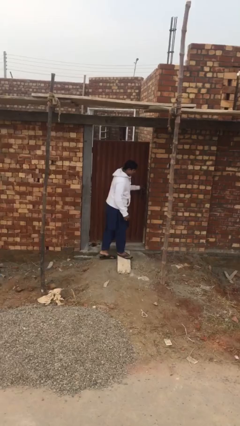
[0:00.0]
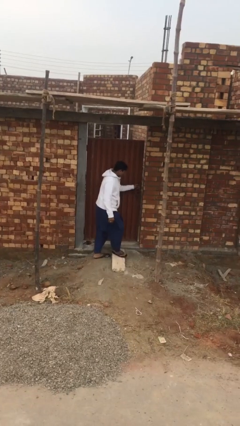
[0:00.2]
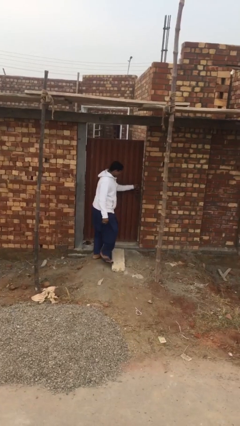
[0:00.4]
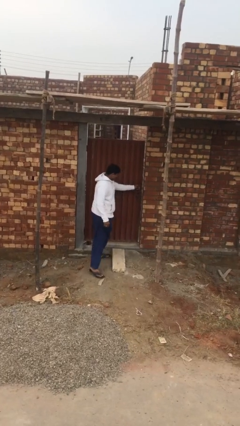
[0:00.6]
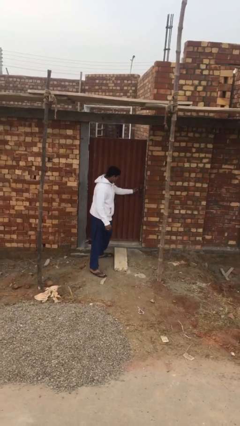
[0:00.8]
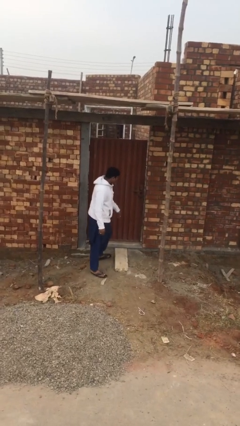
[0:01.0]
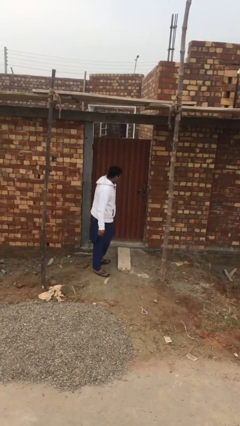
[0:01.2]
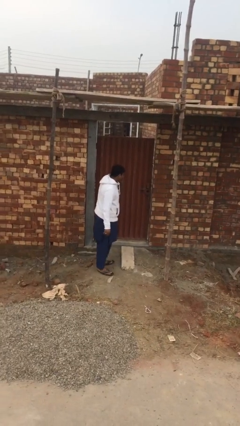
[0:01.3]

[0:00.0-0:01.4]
person closes facility door

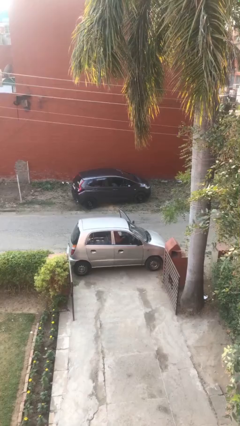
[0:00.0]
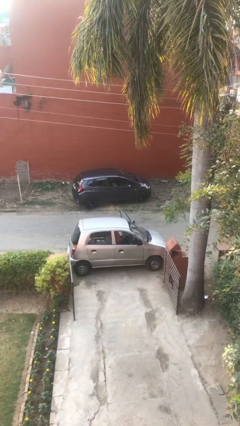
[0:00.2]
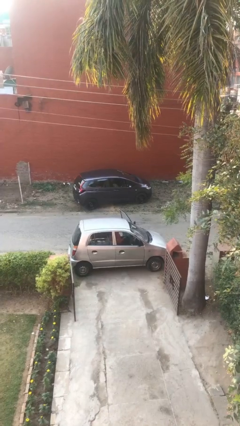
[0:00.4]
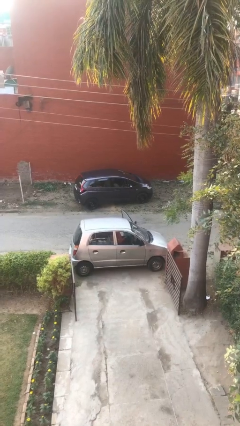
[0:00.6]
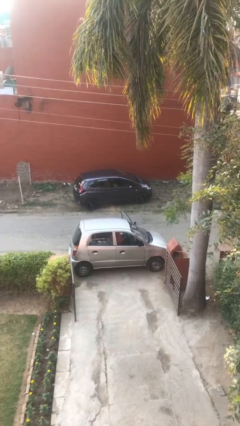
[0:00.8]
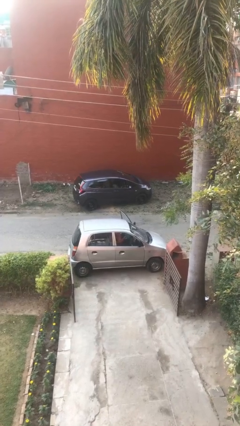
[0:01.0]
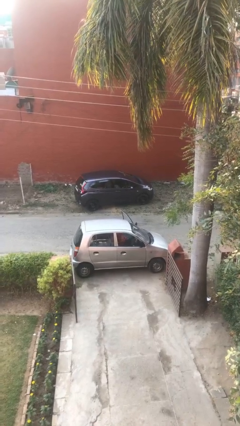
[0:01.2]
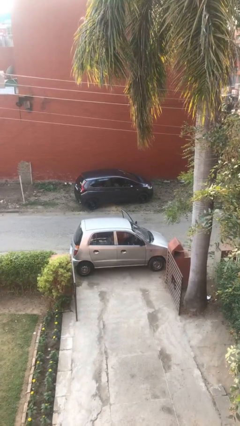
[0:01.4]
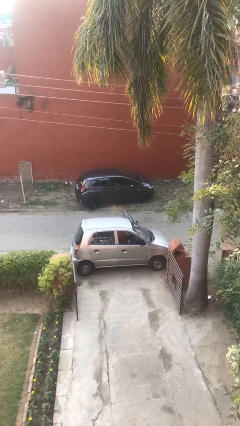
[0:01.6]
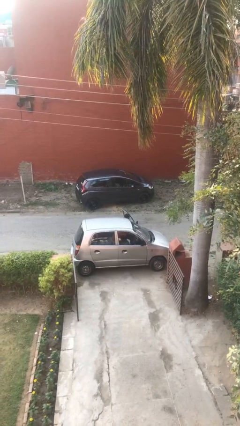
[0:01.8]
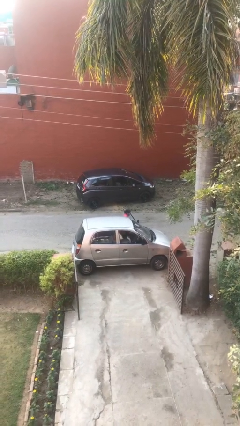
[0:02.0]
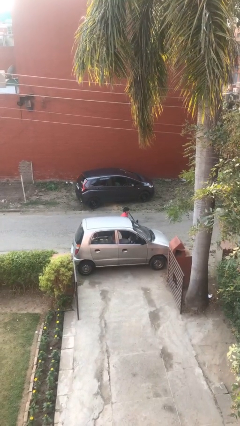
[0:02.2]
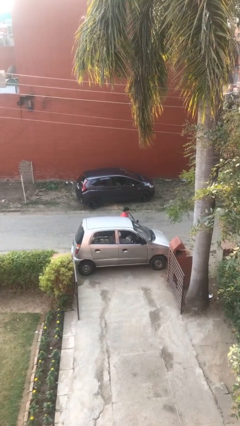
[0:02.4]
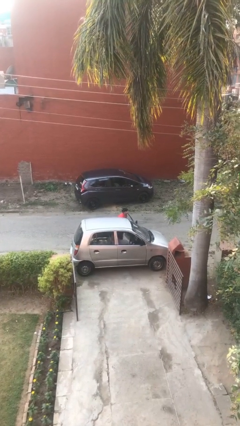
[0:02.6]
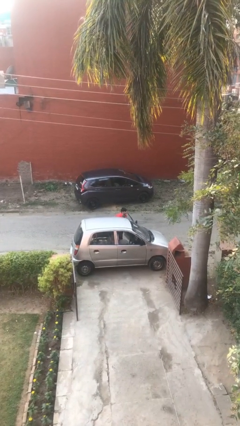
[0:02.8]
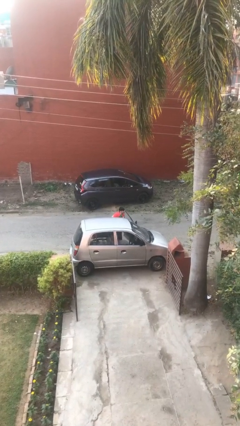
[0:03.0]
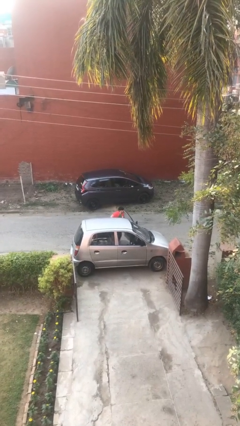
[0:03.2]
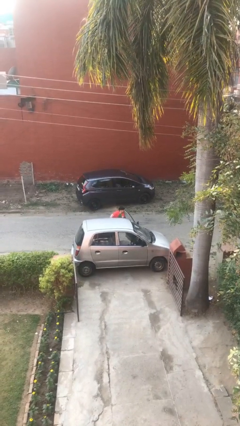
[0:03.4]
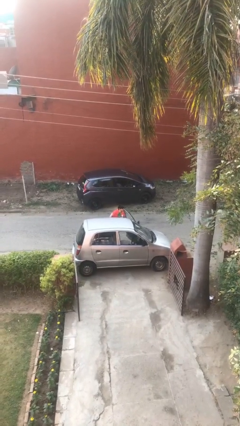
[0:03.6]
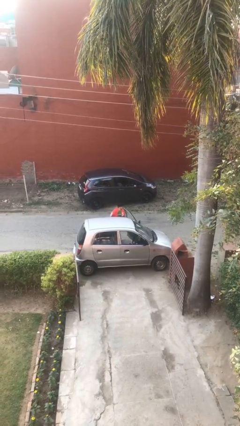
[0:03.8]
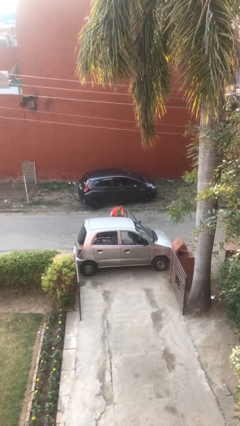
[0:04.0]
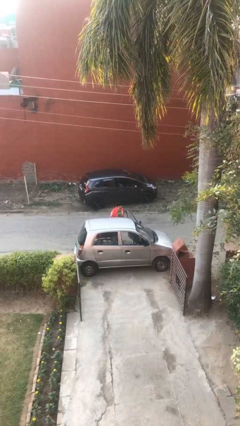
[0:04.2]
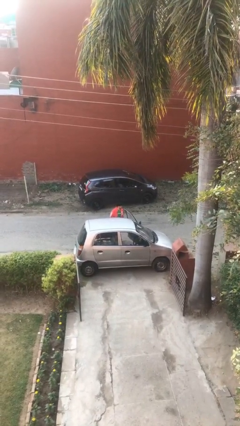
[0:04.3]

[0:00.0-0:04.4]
person exits car

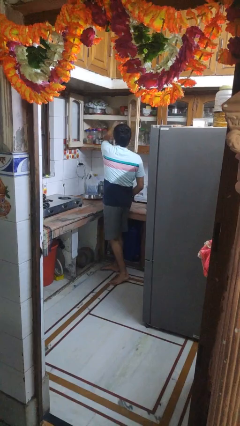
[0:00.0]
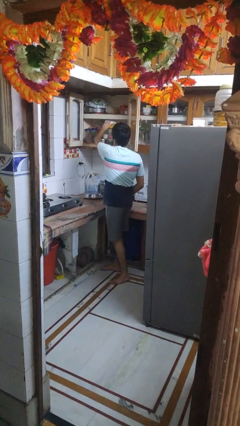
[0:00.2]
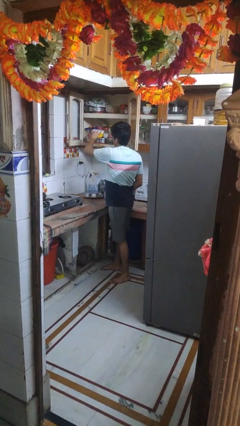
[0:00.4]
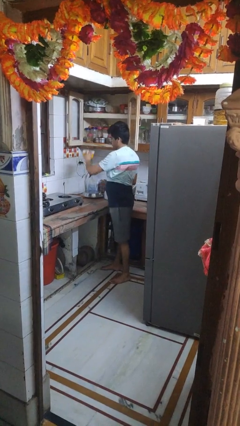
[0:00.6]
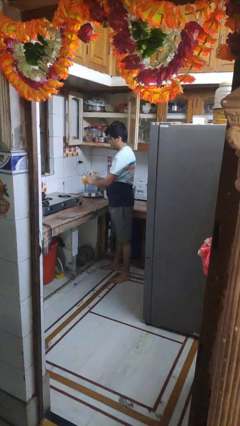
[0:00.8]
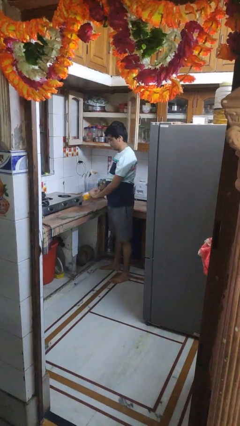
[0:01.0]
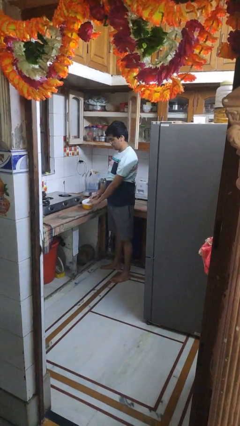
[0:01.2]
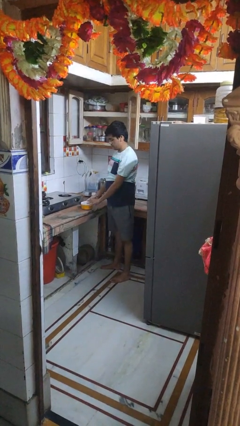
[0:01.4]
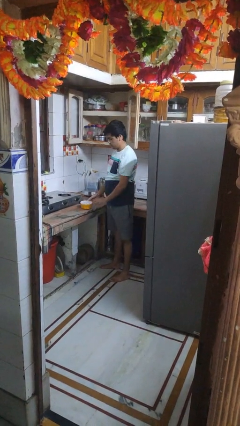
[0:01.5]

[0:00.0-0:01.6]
person takes object from cabinet

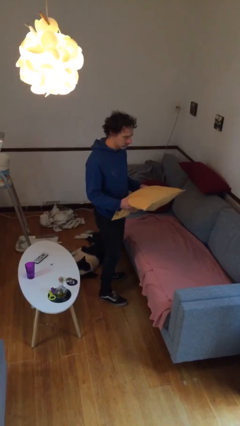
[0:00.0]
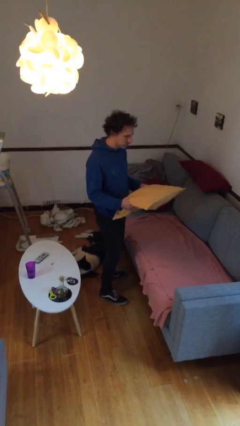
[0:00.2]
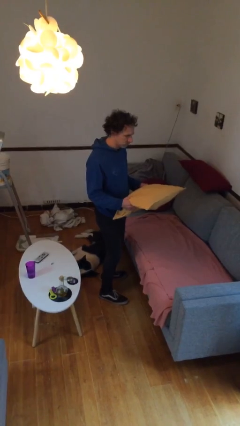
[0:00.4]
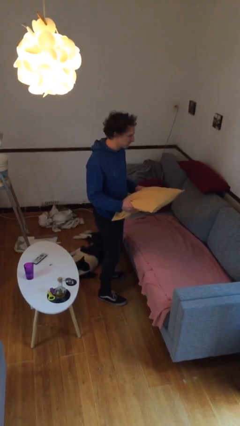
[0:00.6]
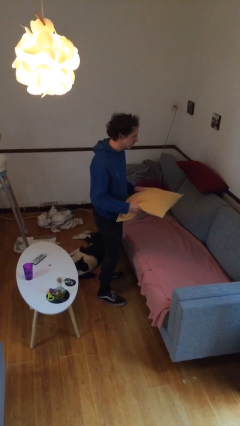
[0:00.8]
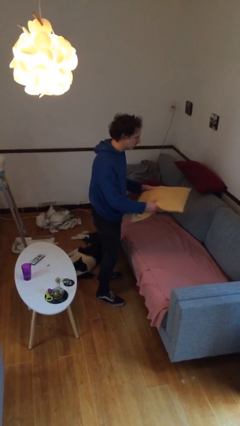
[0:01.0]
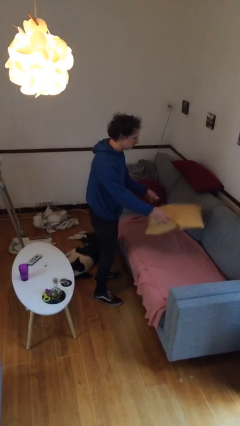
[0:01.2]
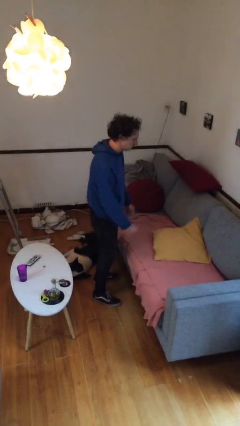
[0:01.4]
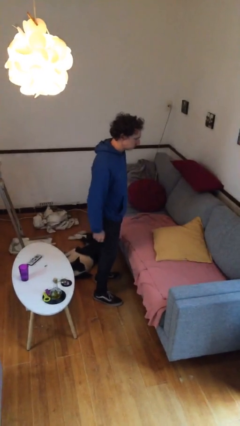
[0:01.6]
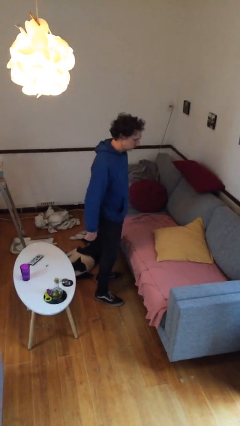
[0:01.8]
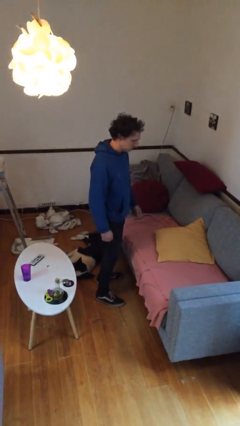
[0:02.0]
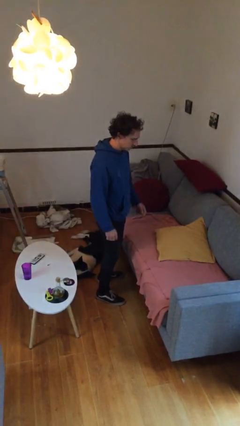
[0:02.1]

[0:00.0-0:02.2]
person puts down object on couch

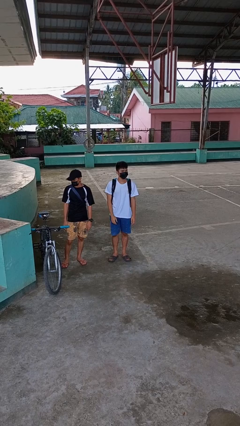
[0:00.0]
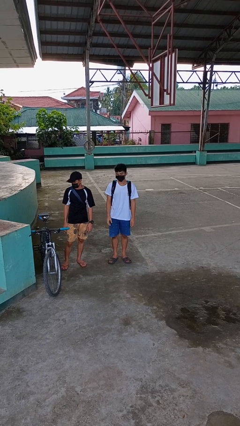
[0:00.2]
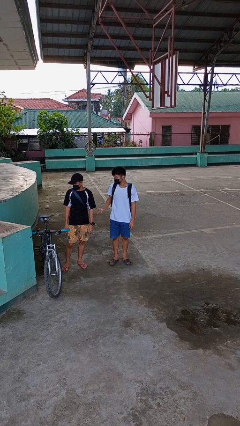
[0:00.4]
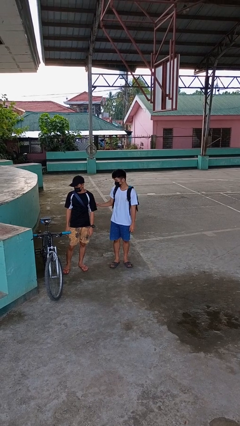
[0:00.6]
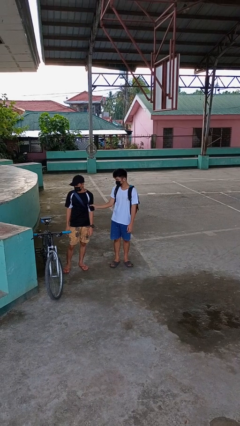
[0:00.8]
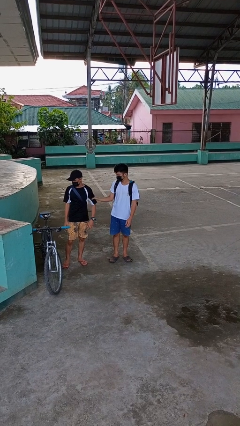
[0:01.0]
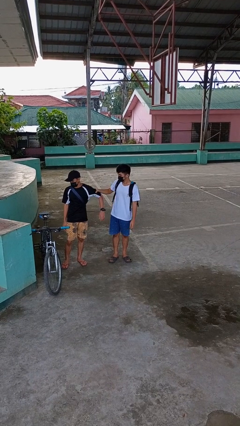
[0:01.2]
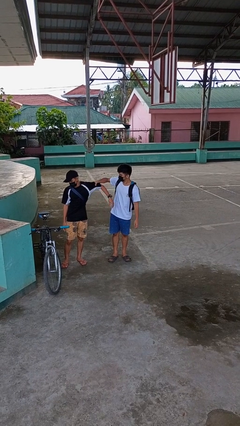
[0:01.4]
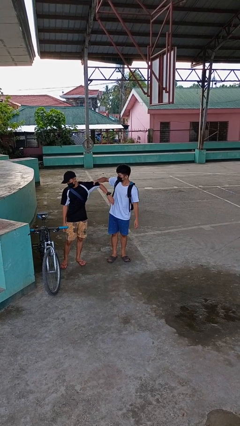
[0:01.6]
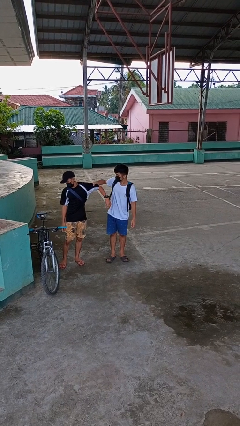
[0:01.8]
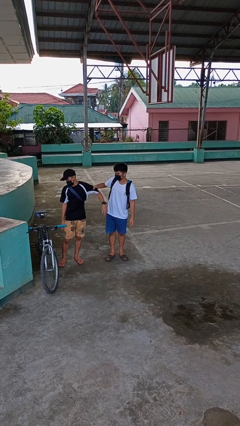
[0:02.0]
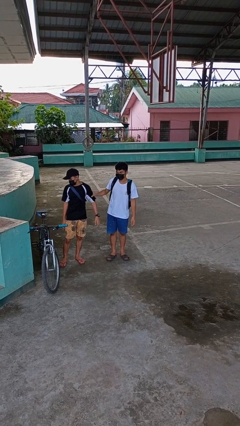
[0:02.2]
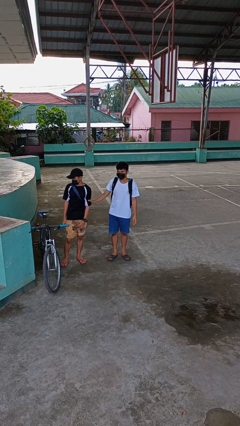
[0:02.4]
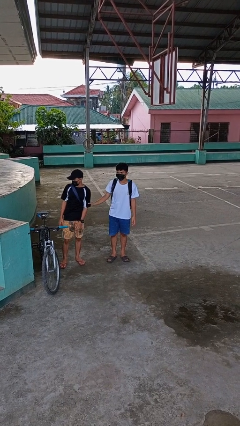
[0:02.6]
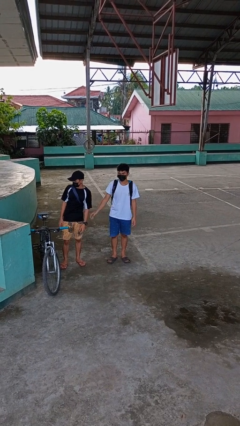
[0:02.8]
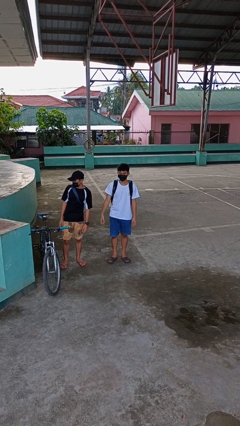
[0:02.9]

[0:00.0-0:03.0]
person grabs person by bicep

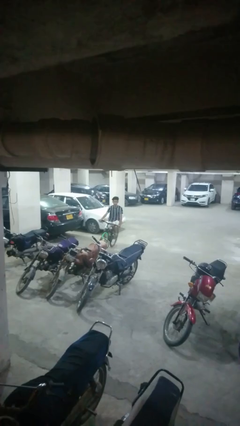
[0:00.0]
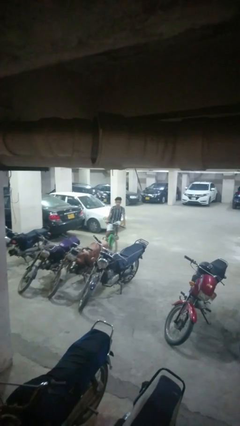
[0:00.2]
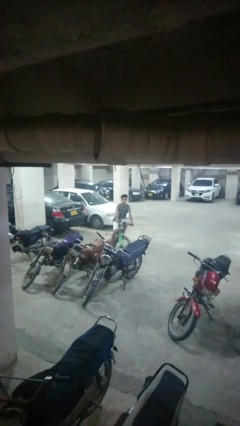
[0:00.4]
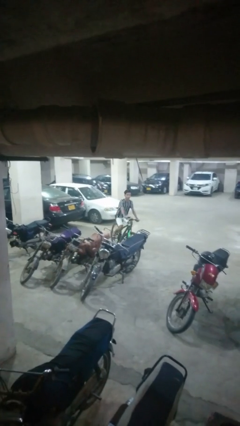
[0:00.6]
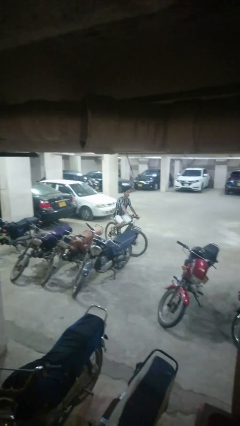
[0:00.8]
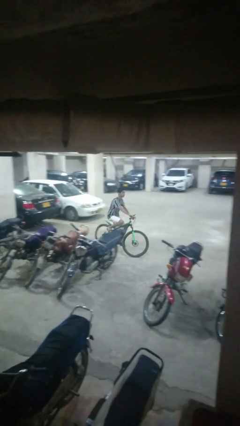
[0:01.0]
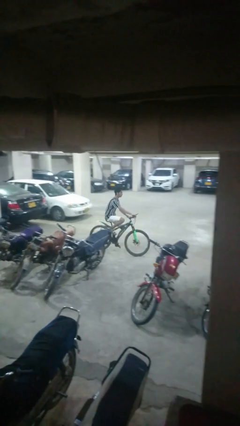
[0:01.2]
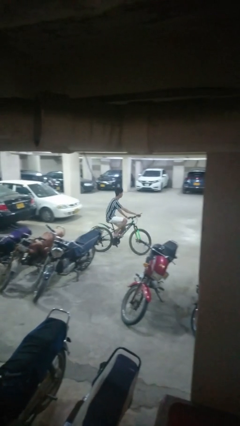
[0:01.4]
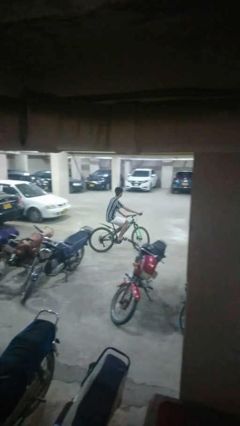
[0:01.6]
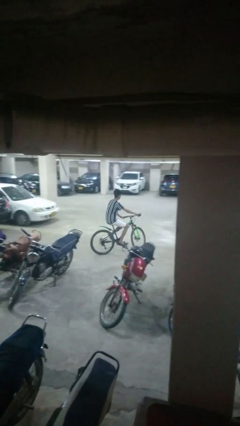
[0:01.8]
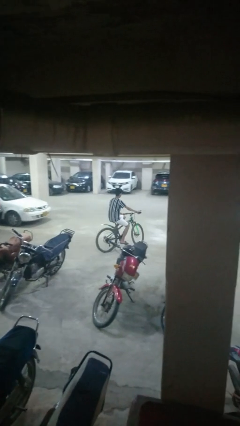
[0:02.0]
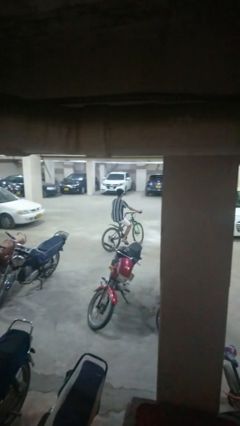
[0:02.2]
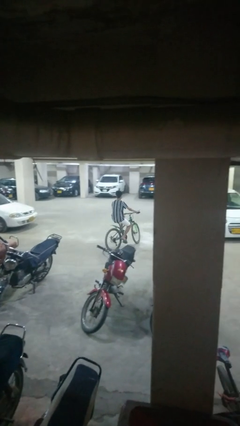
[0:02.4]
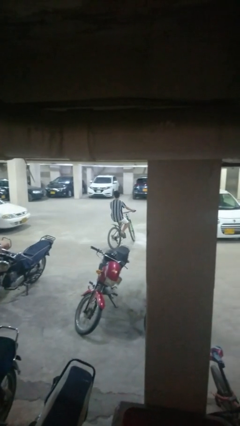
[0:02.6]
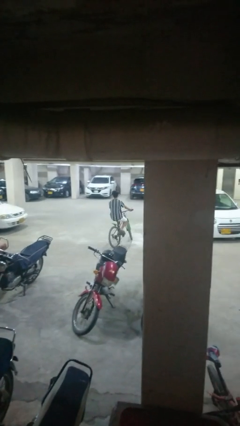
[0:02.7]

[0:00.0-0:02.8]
person rides bicycle

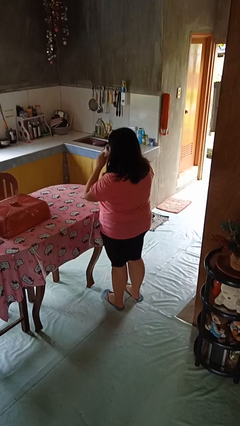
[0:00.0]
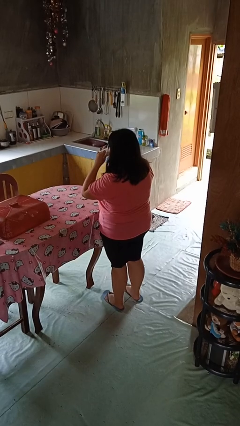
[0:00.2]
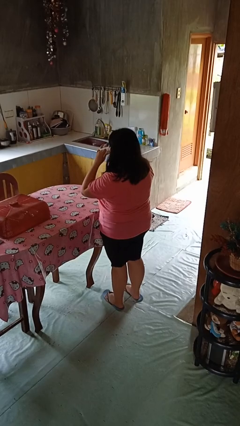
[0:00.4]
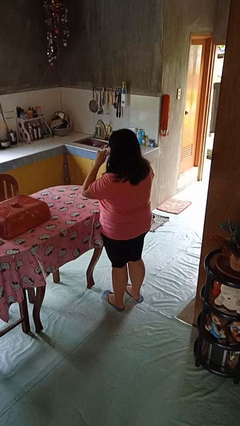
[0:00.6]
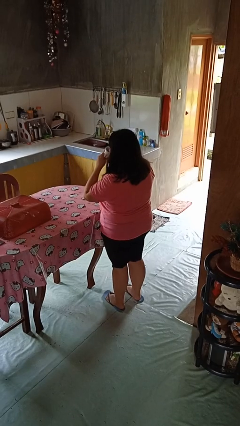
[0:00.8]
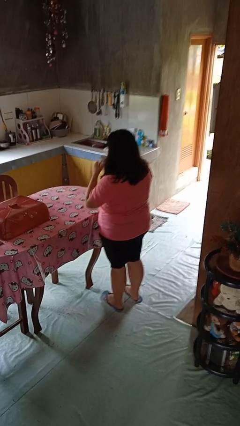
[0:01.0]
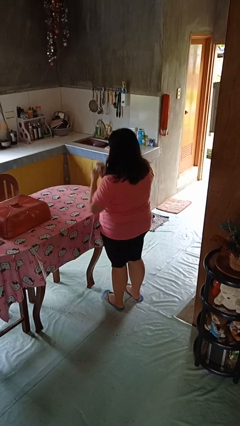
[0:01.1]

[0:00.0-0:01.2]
person drinks from mug

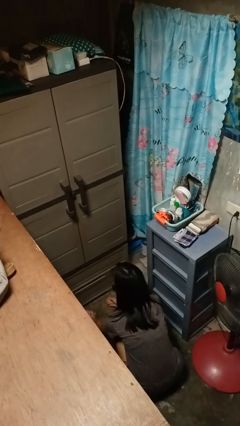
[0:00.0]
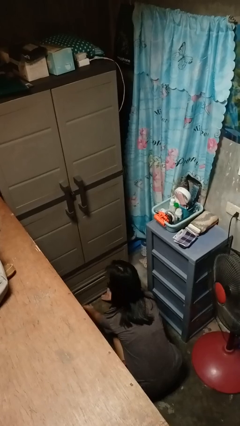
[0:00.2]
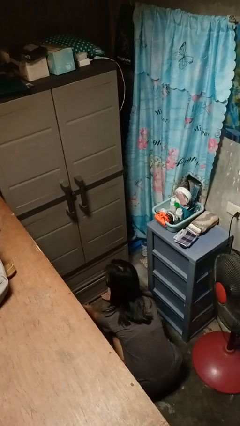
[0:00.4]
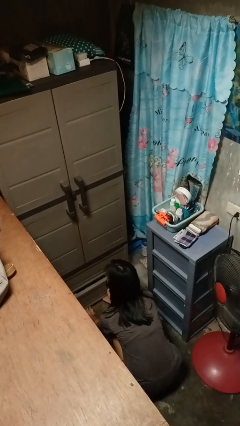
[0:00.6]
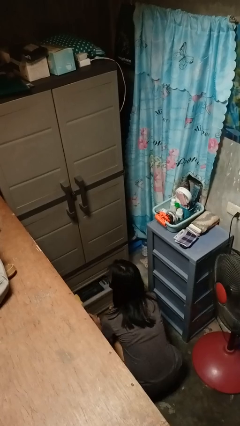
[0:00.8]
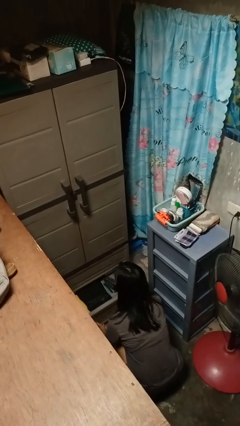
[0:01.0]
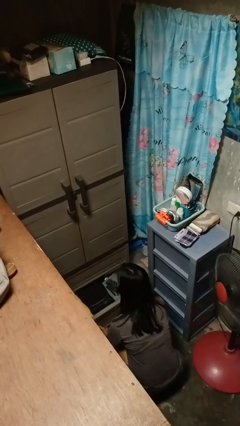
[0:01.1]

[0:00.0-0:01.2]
person opens dresser drawer
